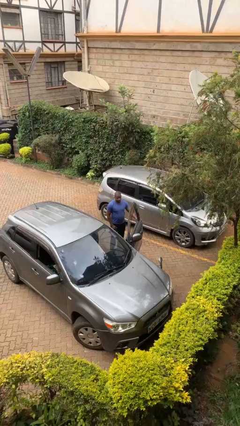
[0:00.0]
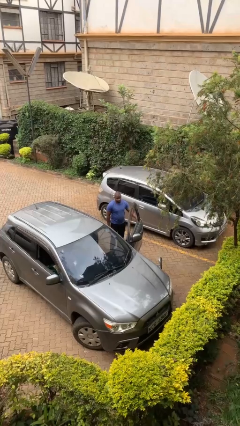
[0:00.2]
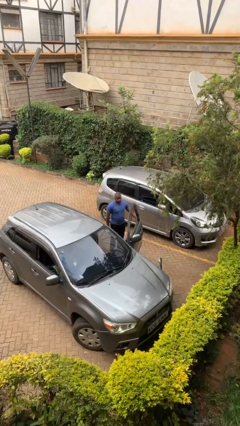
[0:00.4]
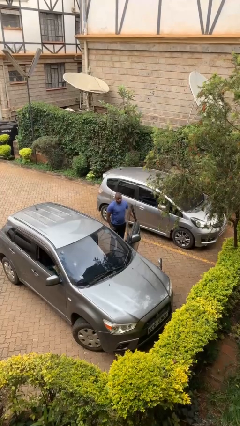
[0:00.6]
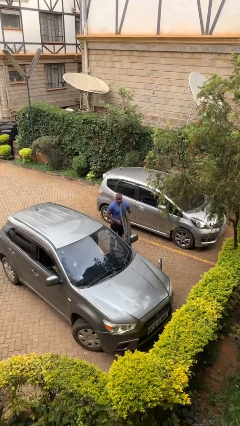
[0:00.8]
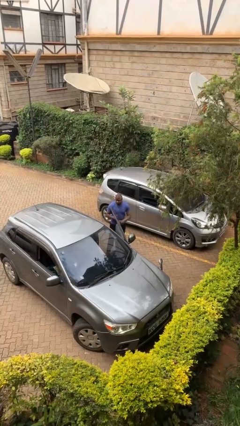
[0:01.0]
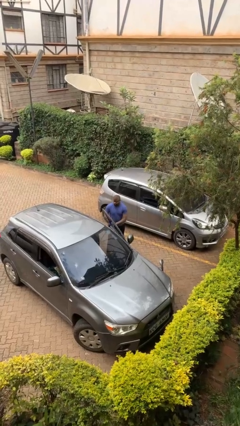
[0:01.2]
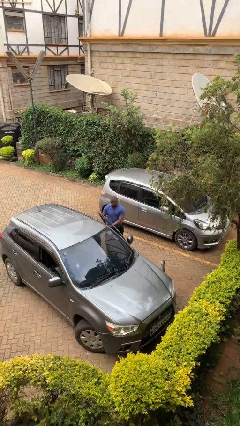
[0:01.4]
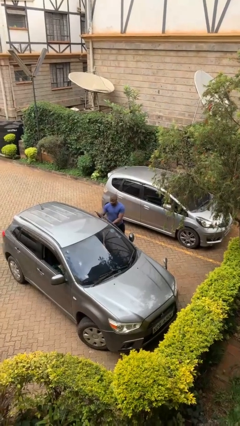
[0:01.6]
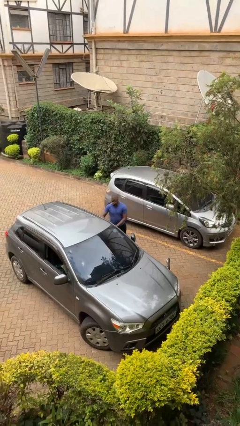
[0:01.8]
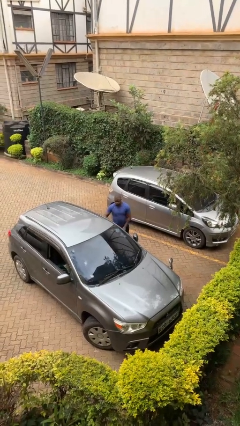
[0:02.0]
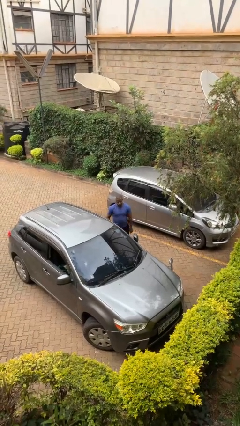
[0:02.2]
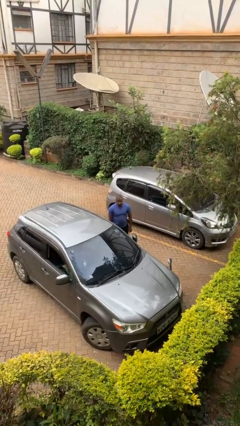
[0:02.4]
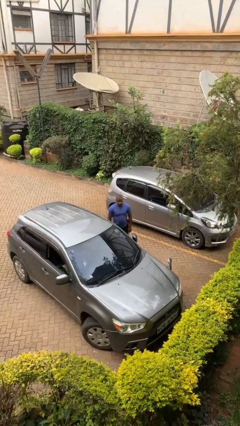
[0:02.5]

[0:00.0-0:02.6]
person closes car door

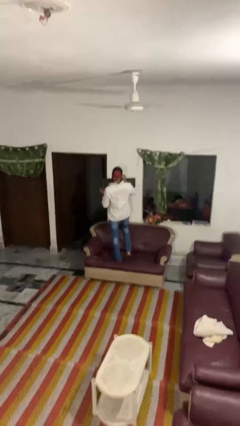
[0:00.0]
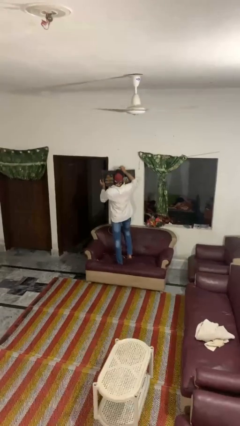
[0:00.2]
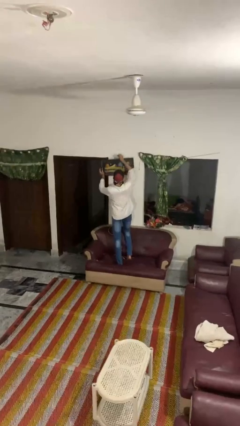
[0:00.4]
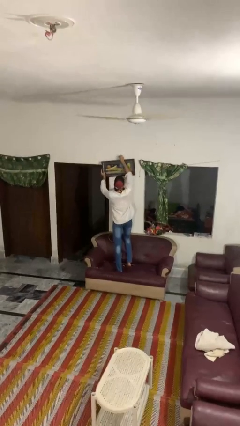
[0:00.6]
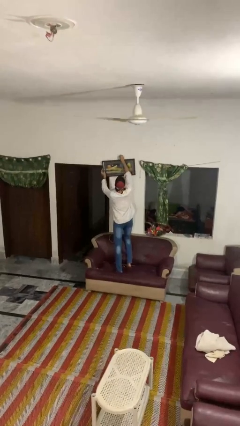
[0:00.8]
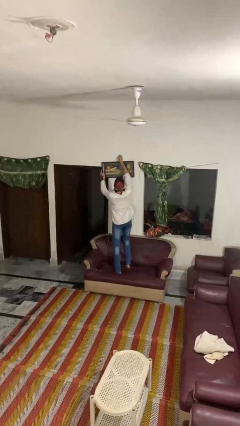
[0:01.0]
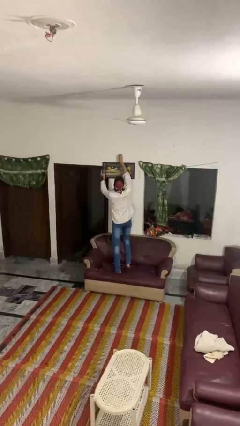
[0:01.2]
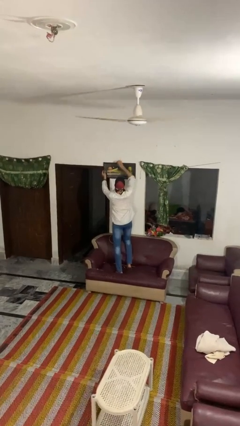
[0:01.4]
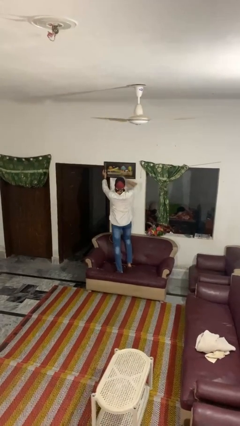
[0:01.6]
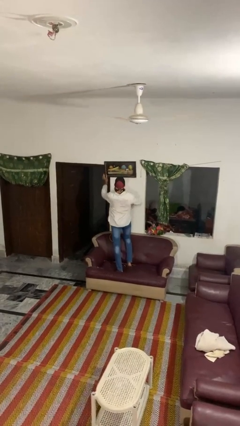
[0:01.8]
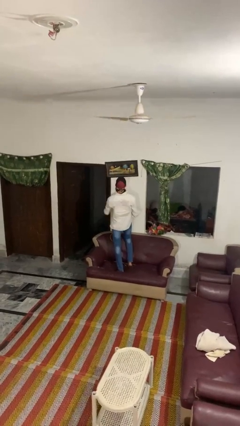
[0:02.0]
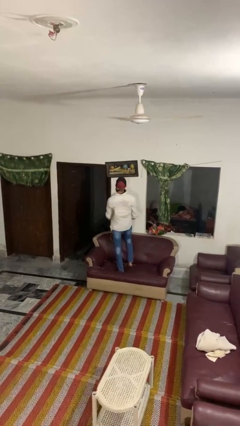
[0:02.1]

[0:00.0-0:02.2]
person puts up picture frame

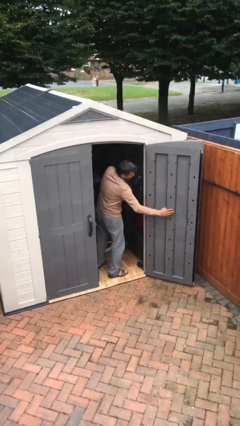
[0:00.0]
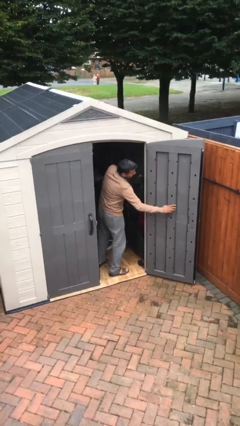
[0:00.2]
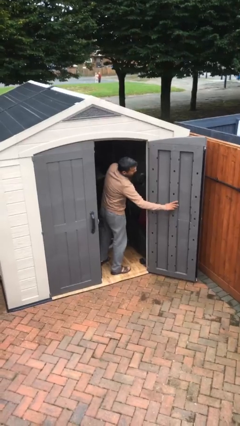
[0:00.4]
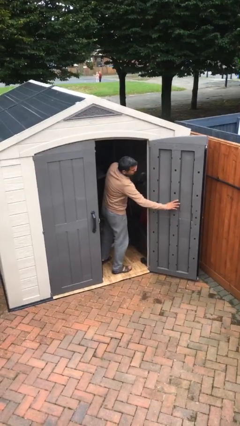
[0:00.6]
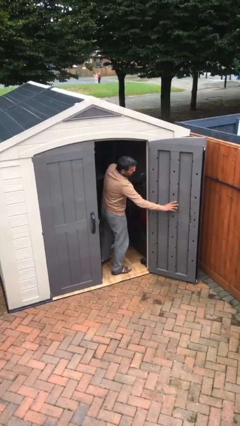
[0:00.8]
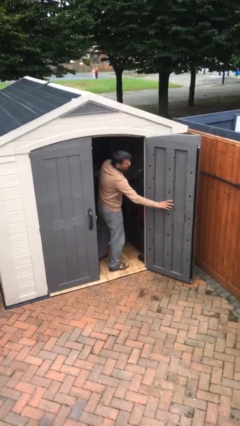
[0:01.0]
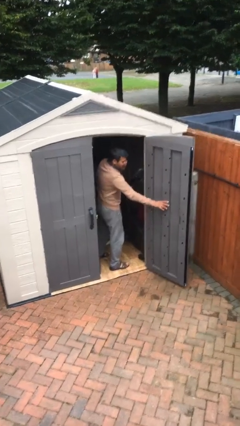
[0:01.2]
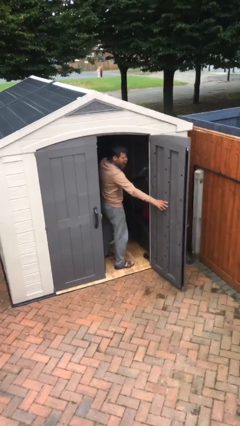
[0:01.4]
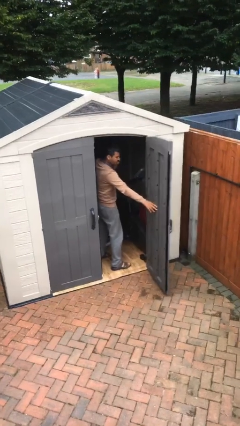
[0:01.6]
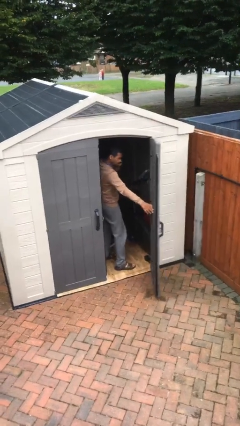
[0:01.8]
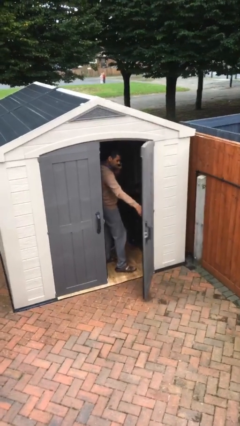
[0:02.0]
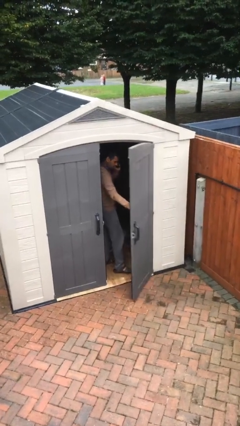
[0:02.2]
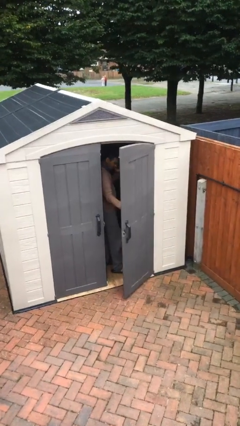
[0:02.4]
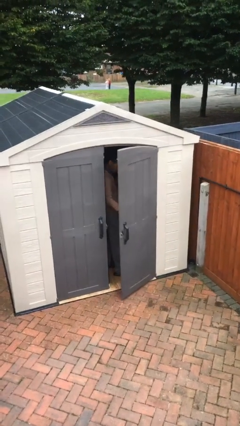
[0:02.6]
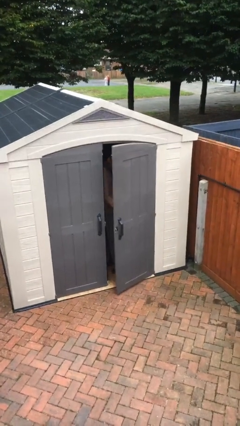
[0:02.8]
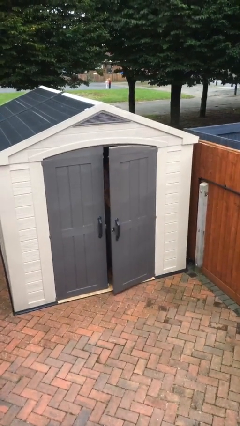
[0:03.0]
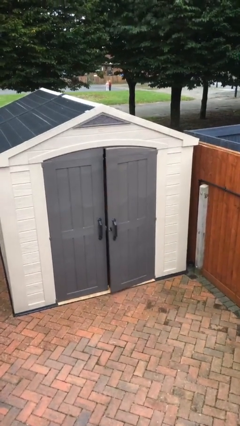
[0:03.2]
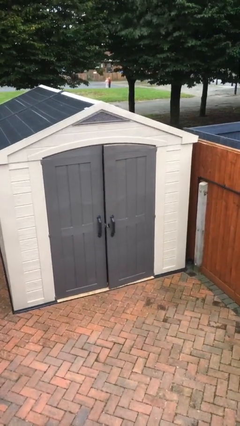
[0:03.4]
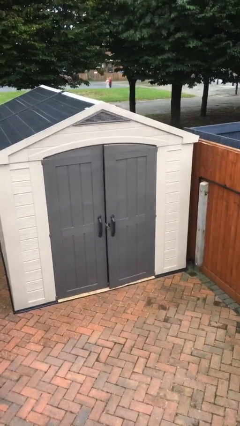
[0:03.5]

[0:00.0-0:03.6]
person closes facility door

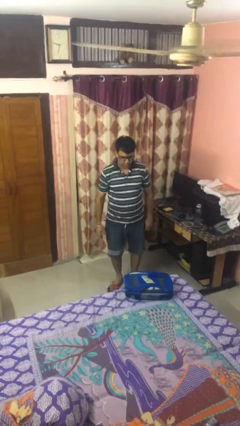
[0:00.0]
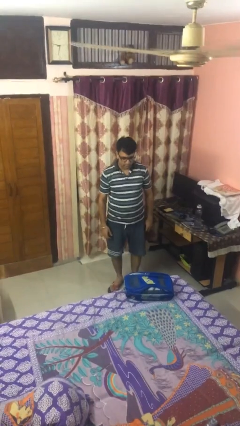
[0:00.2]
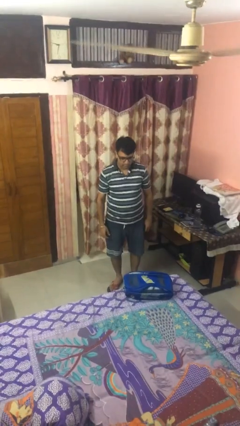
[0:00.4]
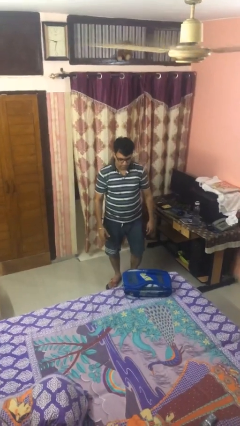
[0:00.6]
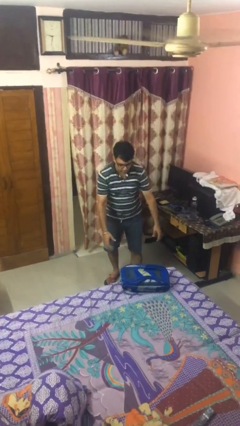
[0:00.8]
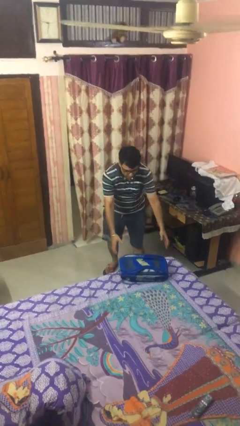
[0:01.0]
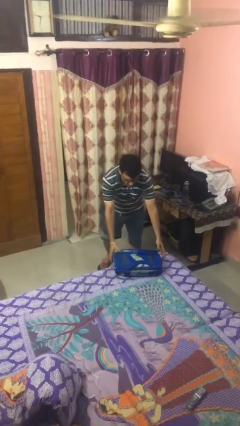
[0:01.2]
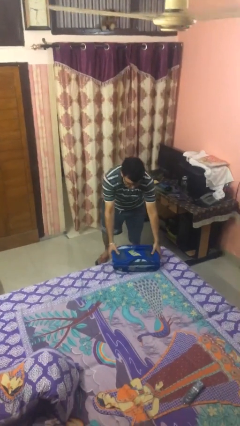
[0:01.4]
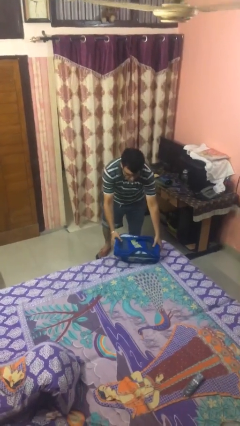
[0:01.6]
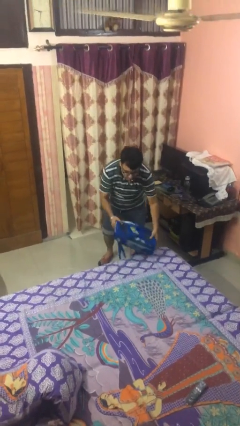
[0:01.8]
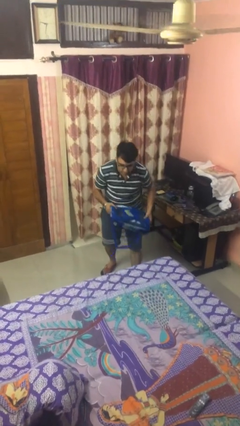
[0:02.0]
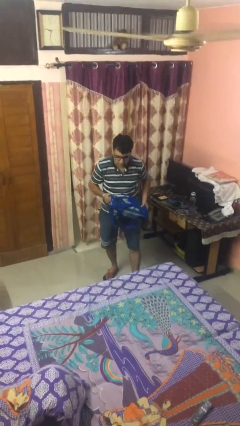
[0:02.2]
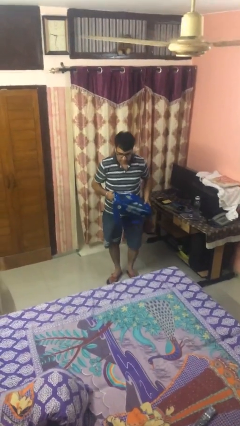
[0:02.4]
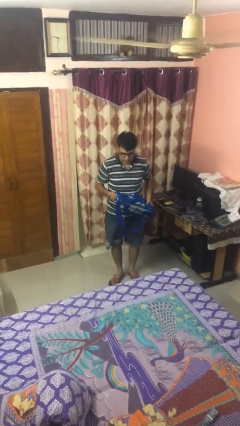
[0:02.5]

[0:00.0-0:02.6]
person picks up object from bed

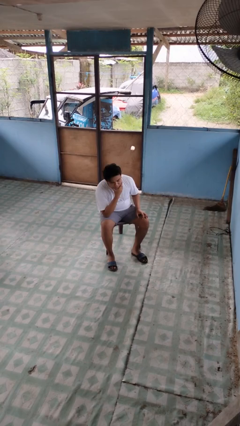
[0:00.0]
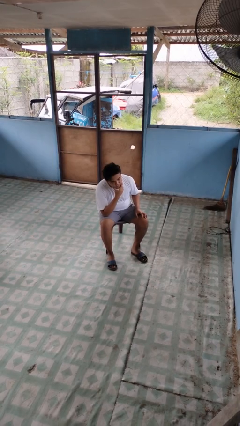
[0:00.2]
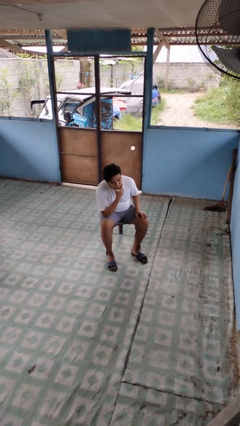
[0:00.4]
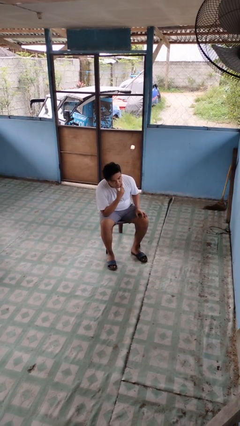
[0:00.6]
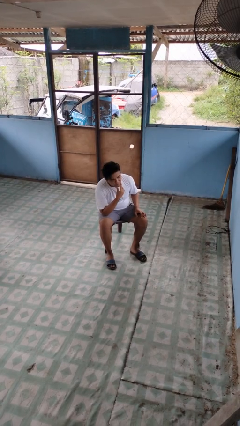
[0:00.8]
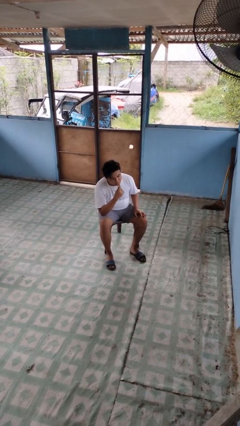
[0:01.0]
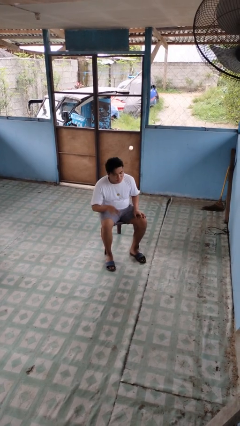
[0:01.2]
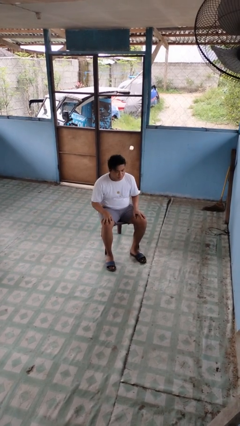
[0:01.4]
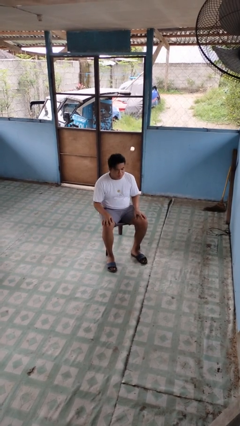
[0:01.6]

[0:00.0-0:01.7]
person strokes chin

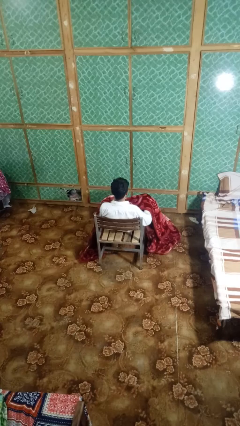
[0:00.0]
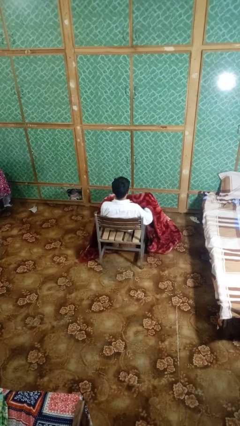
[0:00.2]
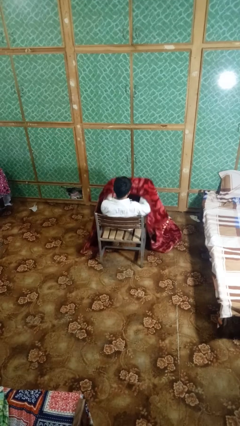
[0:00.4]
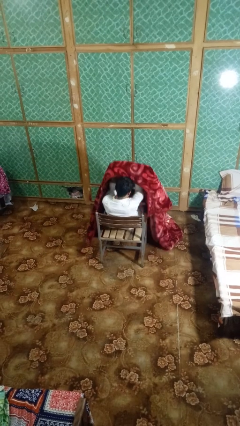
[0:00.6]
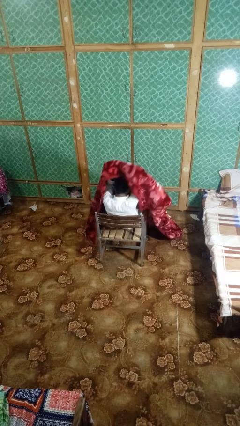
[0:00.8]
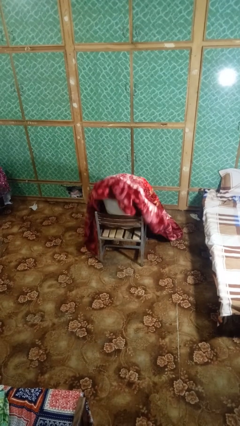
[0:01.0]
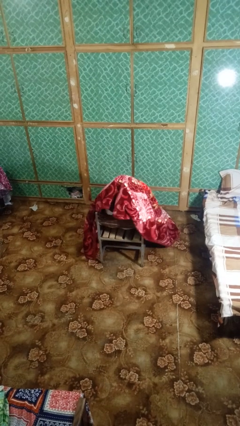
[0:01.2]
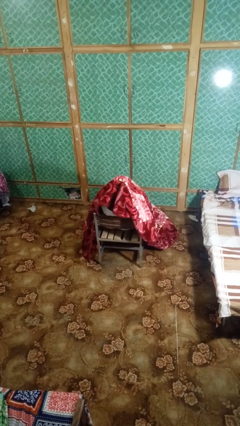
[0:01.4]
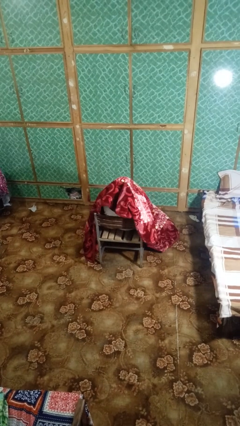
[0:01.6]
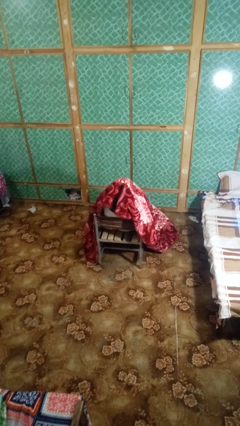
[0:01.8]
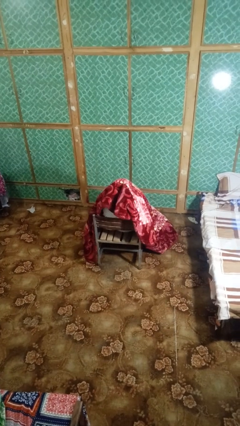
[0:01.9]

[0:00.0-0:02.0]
person covers with blanket

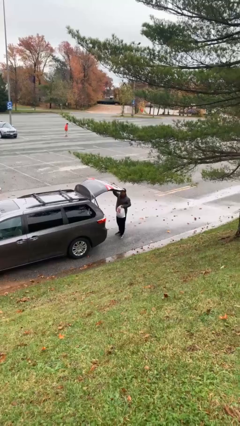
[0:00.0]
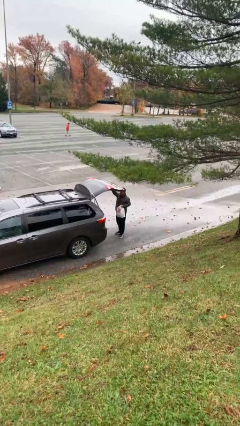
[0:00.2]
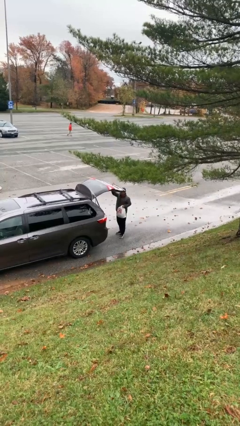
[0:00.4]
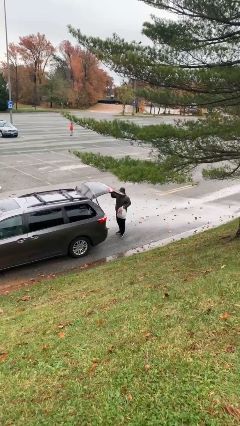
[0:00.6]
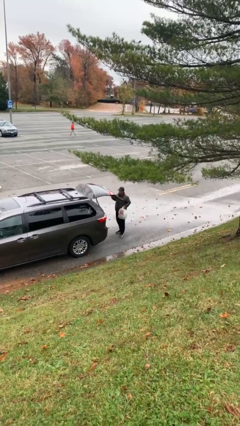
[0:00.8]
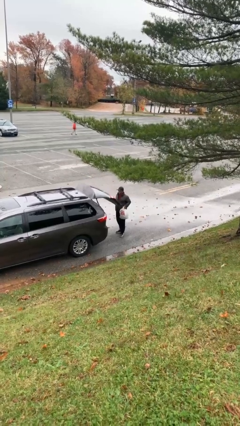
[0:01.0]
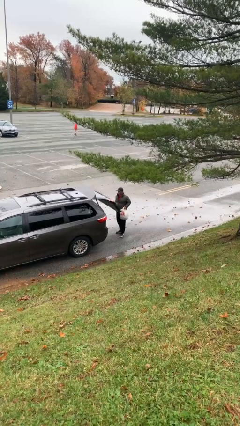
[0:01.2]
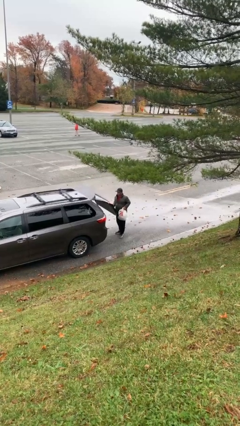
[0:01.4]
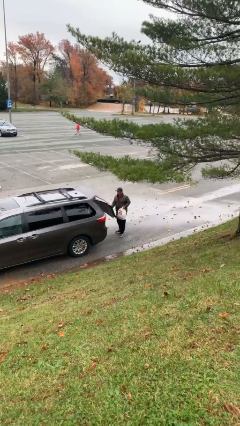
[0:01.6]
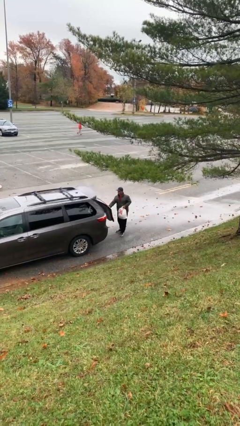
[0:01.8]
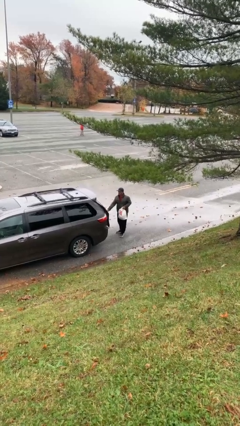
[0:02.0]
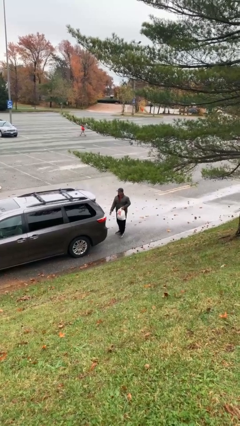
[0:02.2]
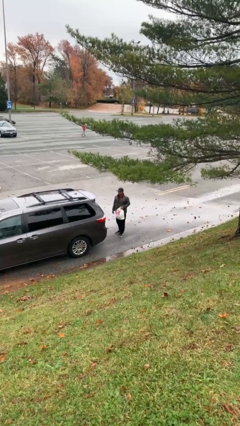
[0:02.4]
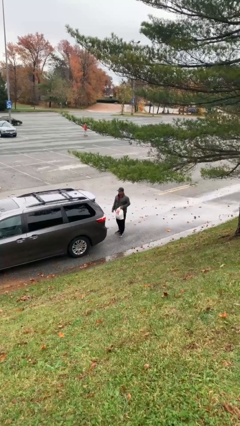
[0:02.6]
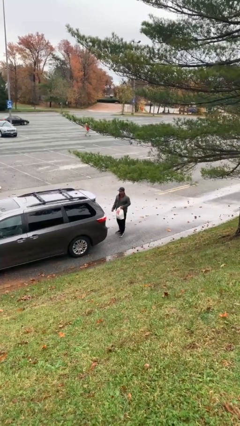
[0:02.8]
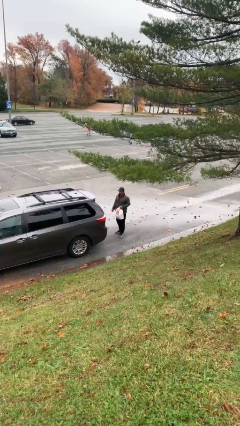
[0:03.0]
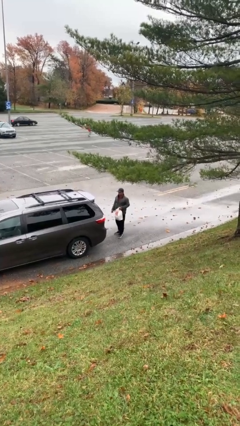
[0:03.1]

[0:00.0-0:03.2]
person closes car trunk
